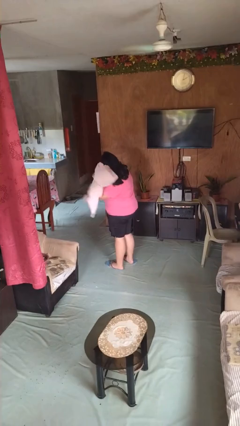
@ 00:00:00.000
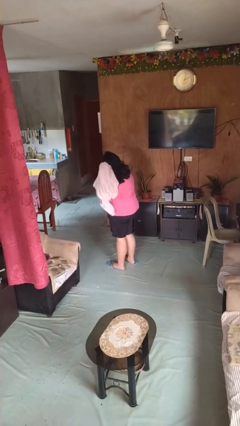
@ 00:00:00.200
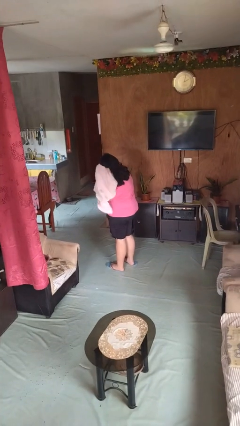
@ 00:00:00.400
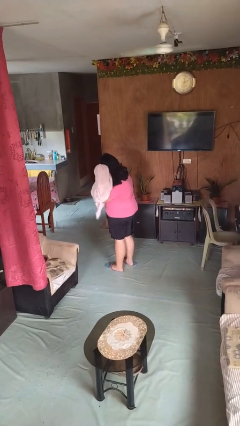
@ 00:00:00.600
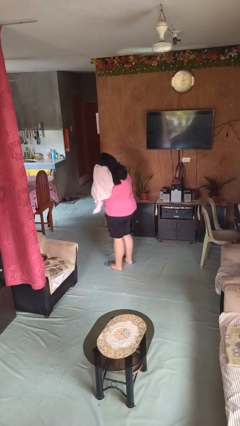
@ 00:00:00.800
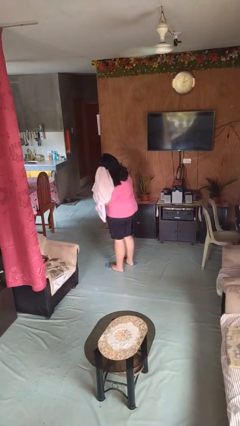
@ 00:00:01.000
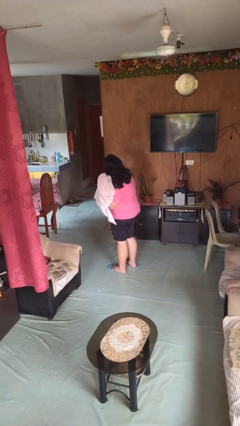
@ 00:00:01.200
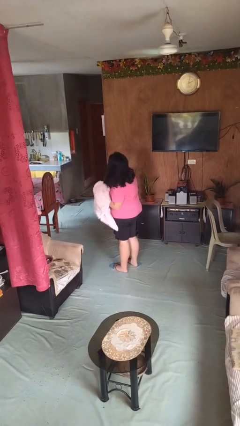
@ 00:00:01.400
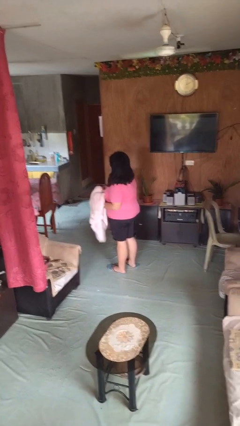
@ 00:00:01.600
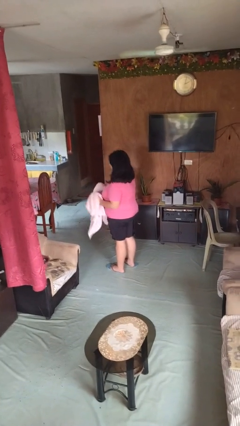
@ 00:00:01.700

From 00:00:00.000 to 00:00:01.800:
person dries hair with towel

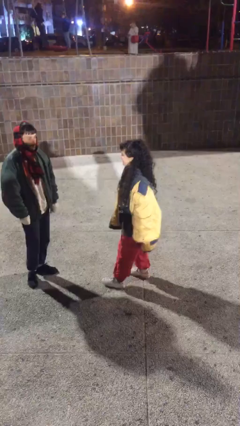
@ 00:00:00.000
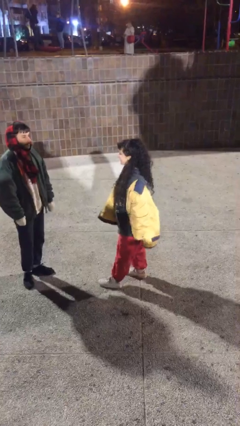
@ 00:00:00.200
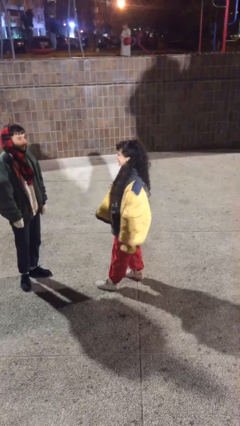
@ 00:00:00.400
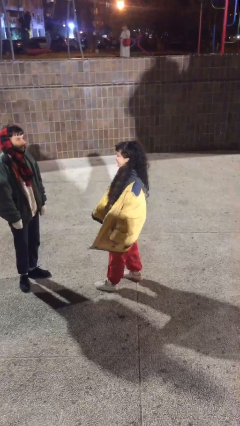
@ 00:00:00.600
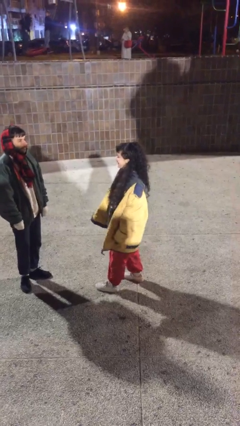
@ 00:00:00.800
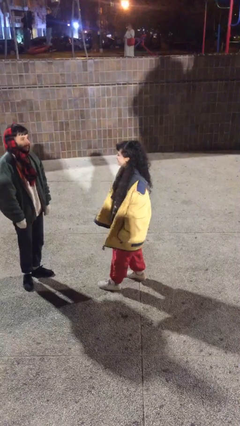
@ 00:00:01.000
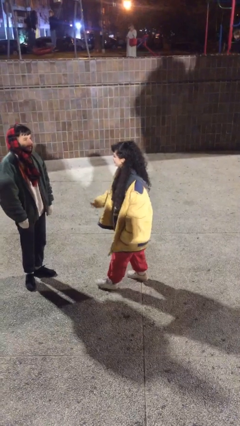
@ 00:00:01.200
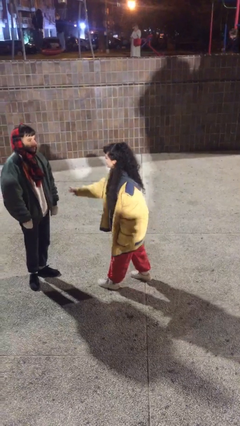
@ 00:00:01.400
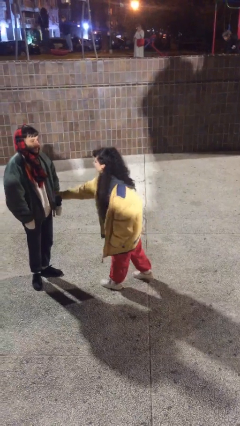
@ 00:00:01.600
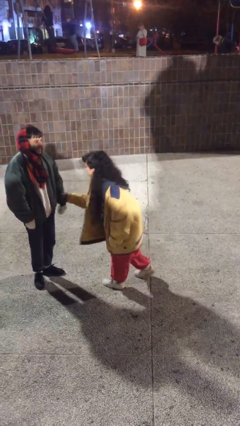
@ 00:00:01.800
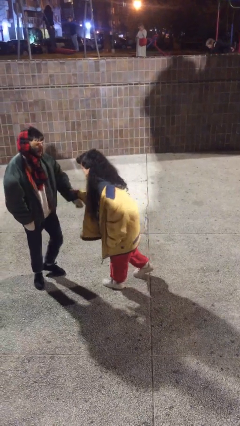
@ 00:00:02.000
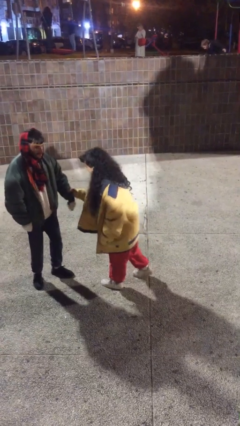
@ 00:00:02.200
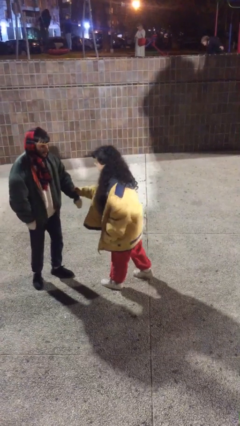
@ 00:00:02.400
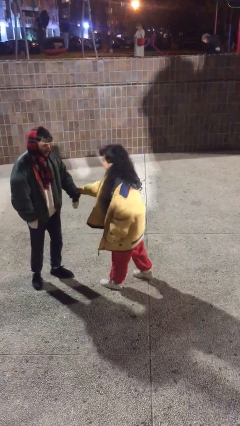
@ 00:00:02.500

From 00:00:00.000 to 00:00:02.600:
person grabs person by forearm

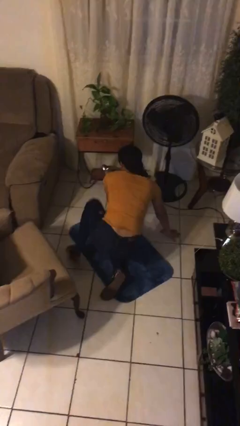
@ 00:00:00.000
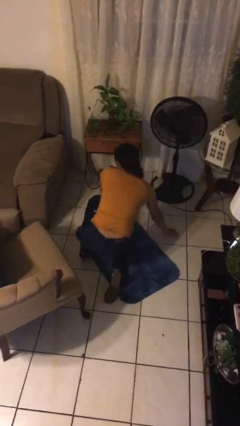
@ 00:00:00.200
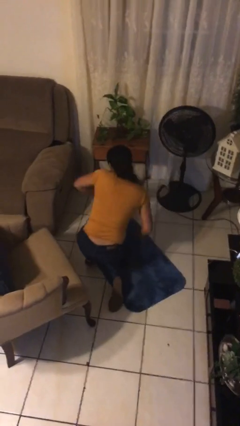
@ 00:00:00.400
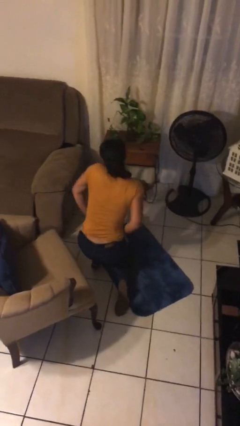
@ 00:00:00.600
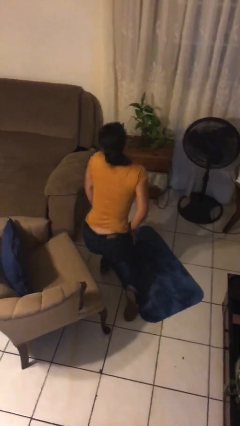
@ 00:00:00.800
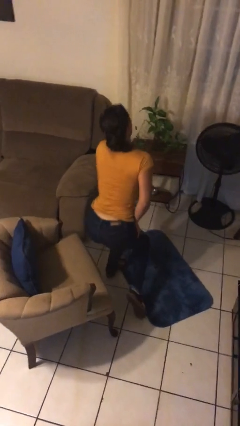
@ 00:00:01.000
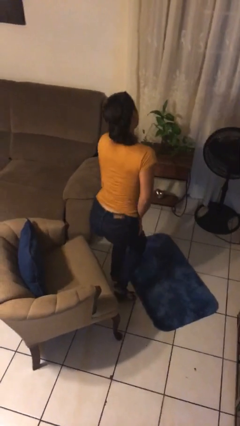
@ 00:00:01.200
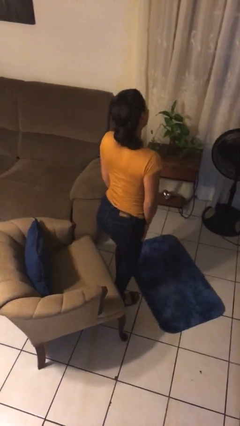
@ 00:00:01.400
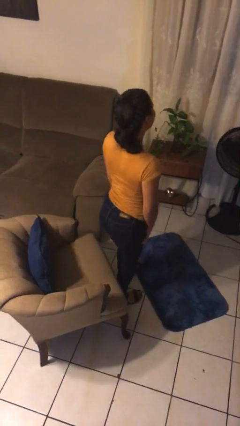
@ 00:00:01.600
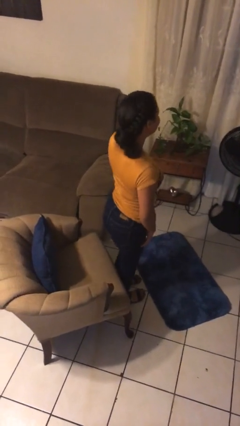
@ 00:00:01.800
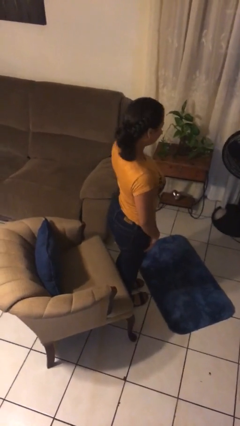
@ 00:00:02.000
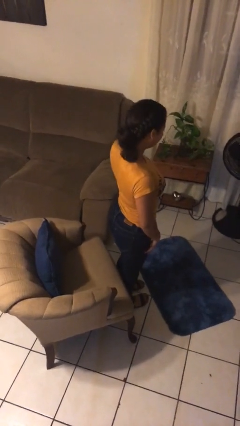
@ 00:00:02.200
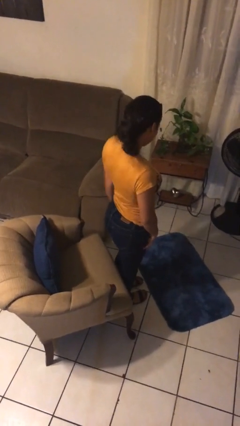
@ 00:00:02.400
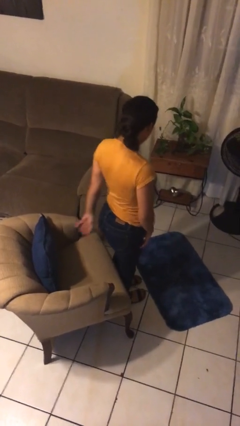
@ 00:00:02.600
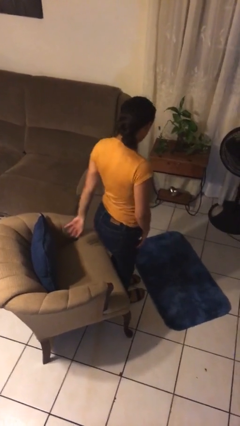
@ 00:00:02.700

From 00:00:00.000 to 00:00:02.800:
person stands up from floor

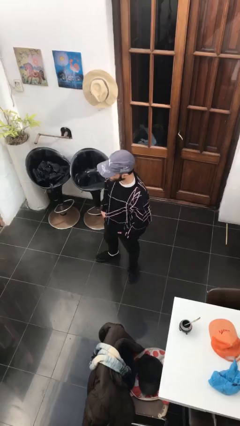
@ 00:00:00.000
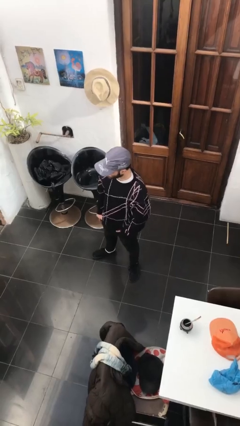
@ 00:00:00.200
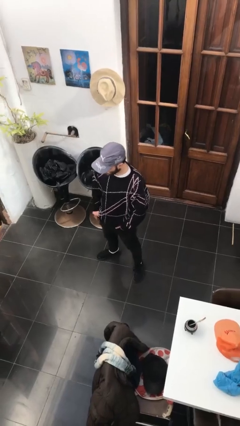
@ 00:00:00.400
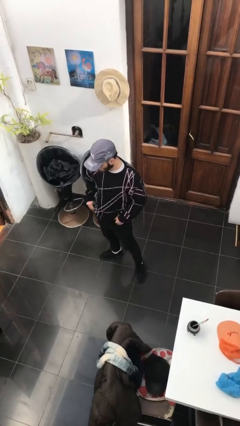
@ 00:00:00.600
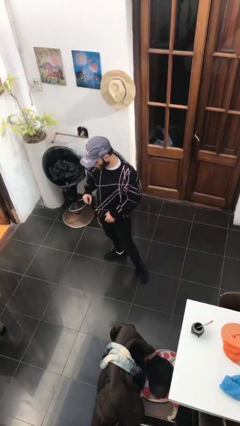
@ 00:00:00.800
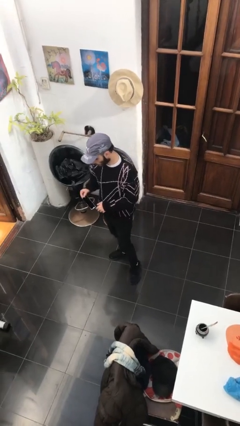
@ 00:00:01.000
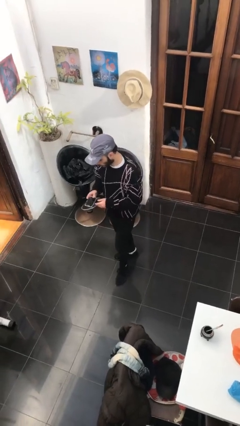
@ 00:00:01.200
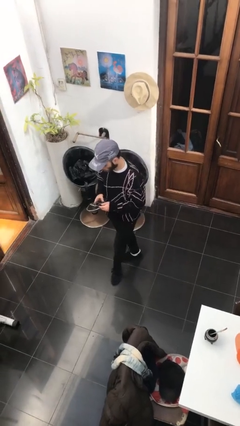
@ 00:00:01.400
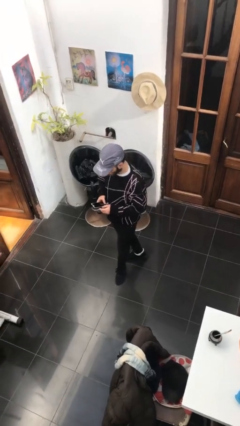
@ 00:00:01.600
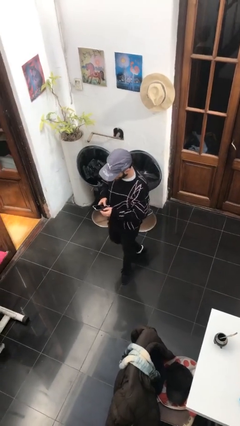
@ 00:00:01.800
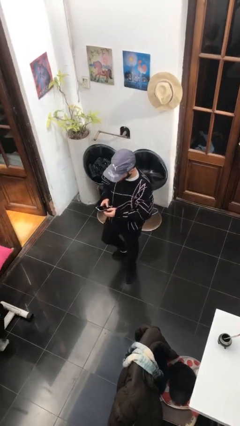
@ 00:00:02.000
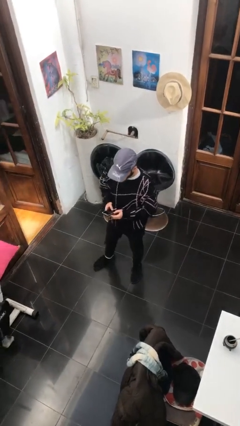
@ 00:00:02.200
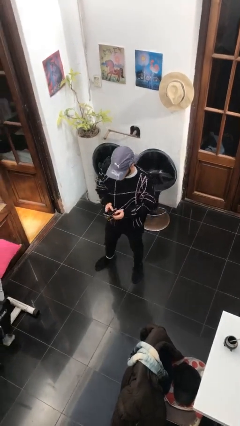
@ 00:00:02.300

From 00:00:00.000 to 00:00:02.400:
person takes phone from pocket

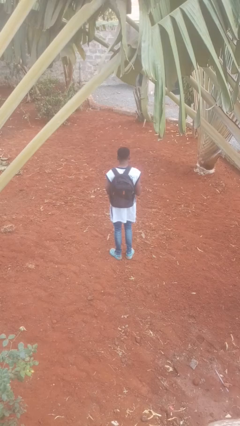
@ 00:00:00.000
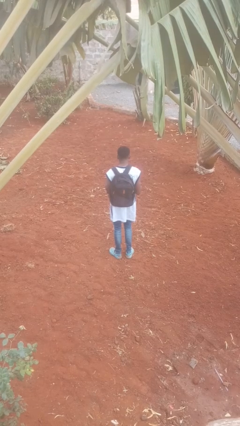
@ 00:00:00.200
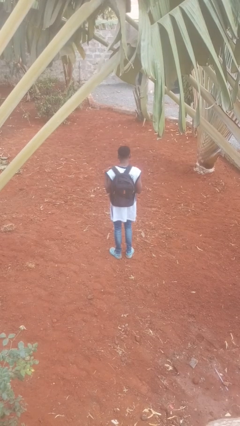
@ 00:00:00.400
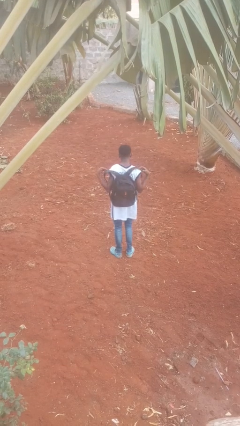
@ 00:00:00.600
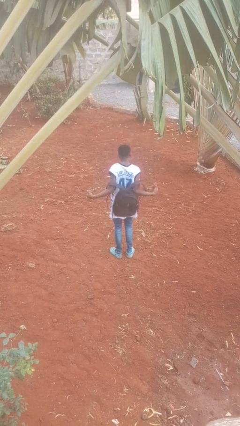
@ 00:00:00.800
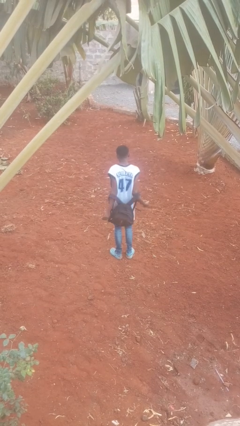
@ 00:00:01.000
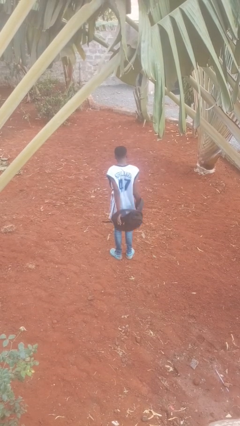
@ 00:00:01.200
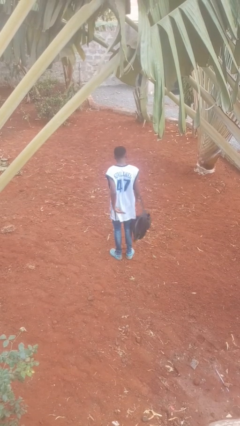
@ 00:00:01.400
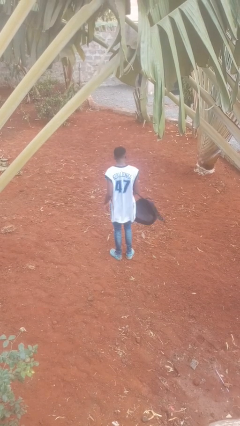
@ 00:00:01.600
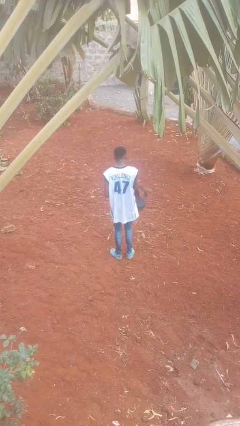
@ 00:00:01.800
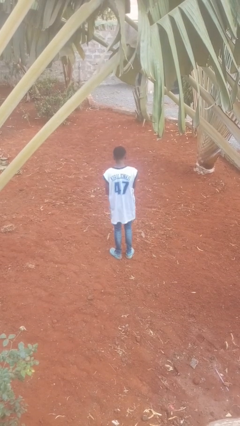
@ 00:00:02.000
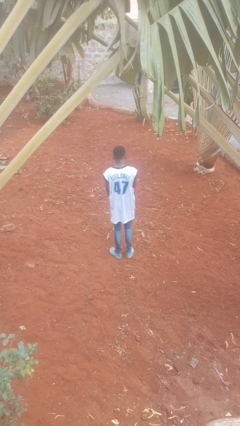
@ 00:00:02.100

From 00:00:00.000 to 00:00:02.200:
person takes off backpack

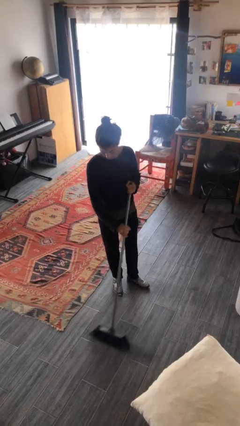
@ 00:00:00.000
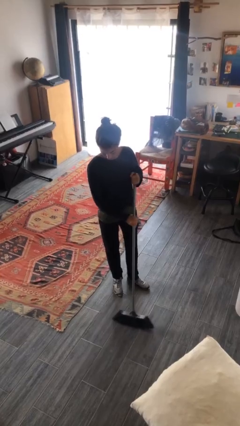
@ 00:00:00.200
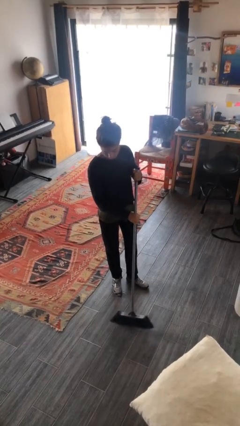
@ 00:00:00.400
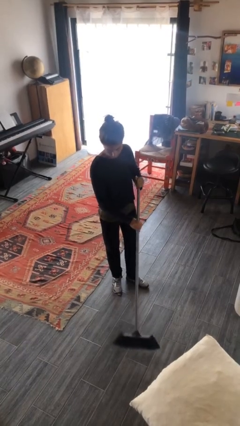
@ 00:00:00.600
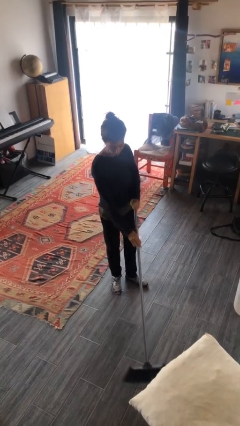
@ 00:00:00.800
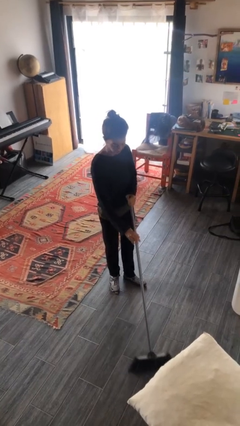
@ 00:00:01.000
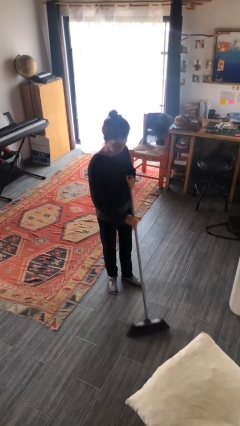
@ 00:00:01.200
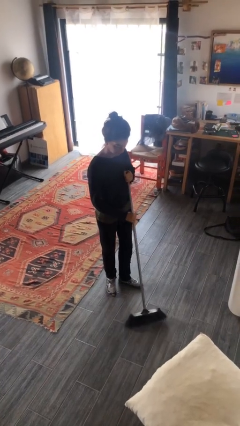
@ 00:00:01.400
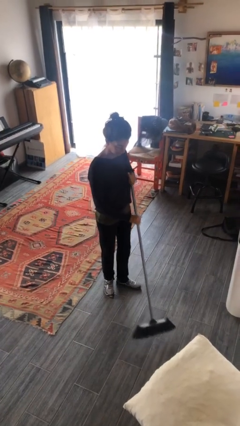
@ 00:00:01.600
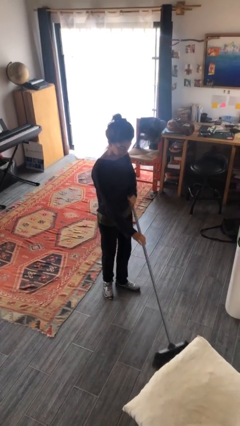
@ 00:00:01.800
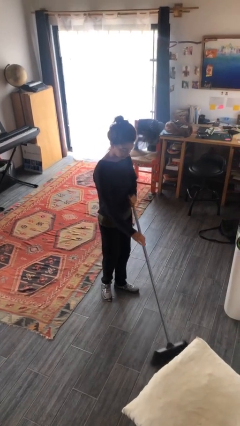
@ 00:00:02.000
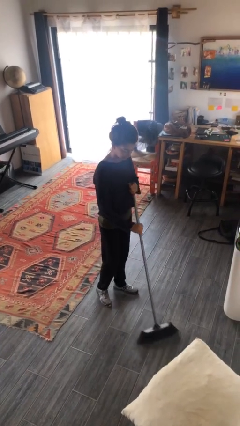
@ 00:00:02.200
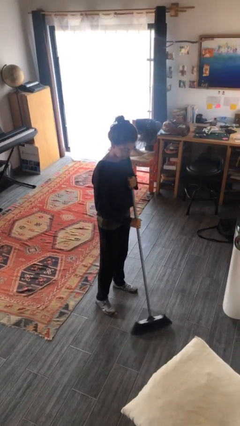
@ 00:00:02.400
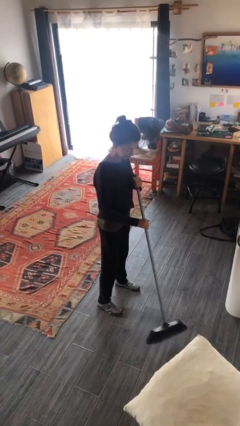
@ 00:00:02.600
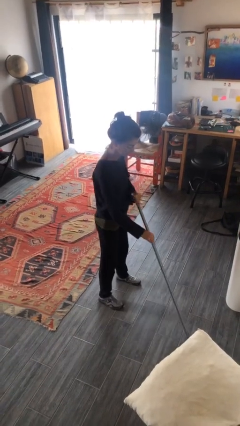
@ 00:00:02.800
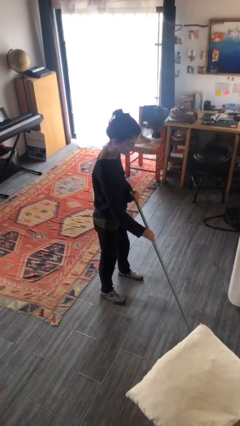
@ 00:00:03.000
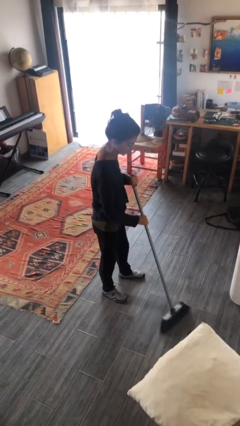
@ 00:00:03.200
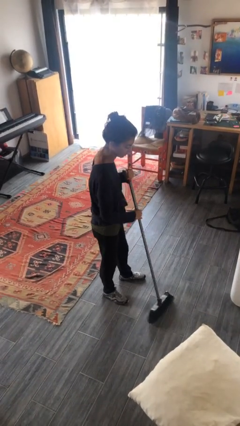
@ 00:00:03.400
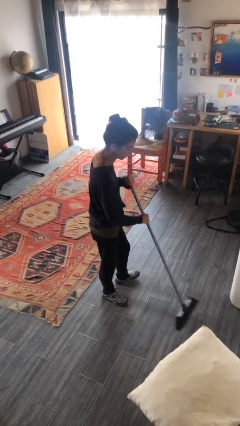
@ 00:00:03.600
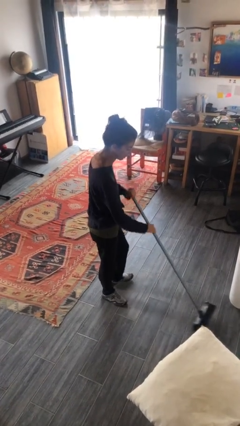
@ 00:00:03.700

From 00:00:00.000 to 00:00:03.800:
person sweeps floor

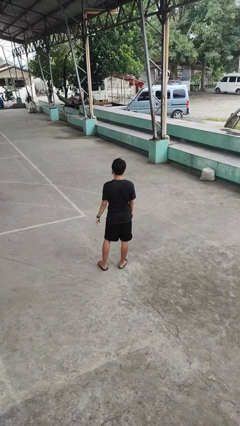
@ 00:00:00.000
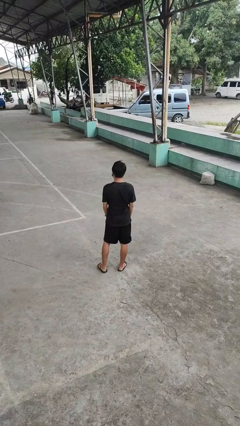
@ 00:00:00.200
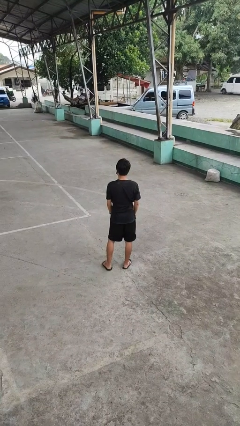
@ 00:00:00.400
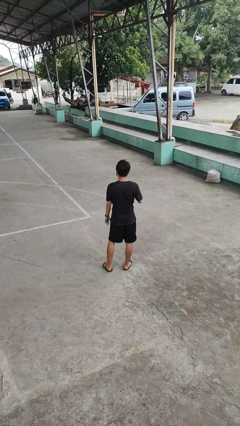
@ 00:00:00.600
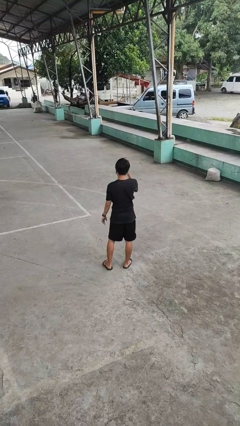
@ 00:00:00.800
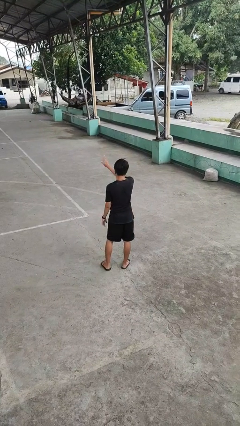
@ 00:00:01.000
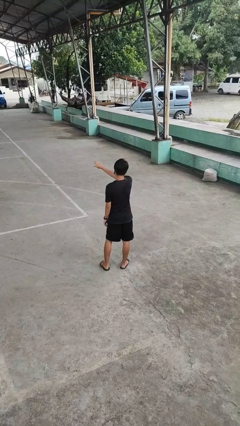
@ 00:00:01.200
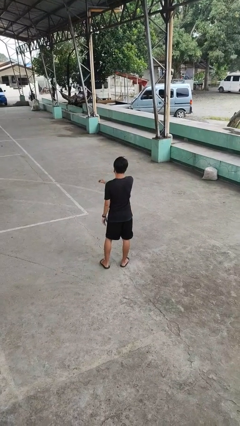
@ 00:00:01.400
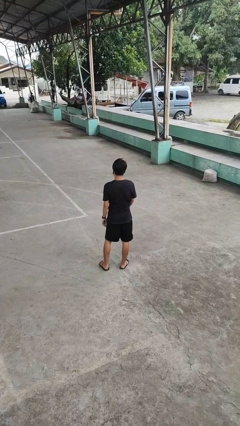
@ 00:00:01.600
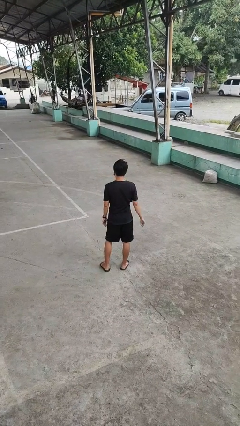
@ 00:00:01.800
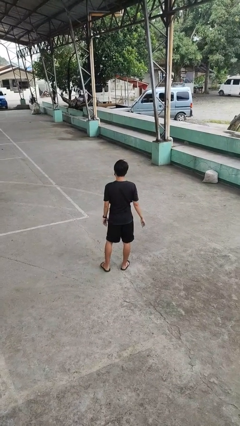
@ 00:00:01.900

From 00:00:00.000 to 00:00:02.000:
person gestures swipe left
